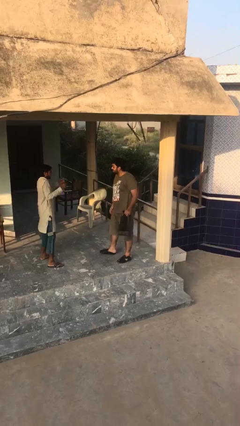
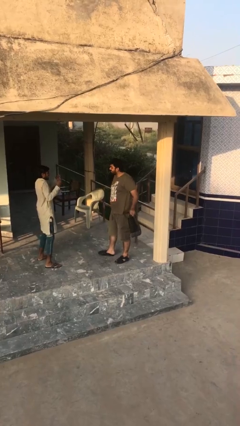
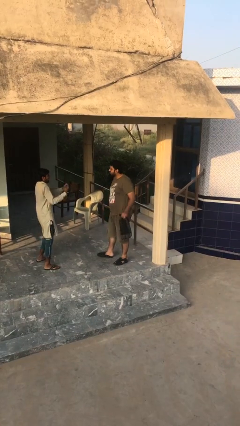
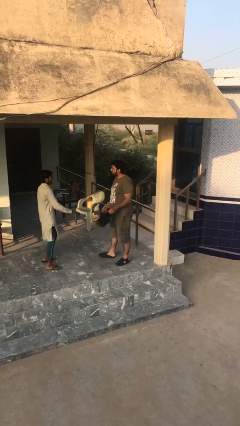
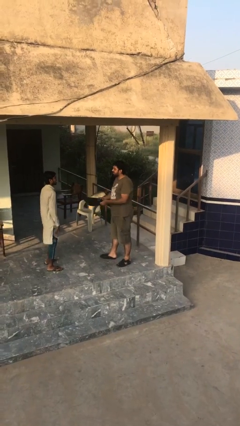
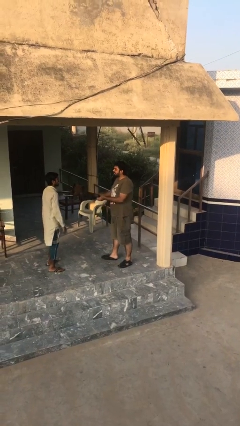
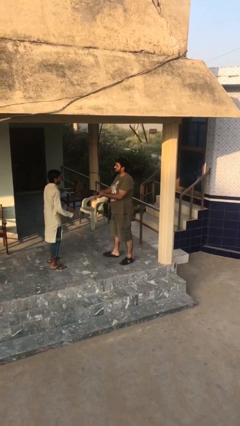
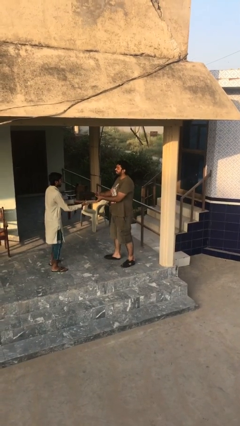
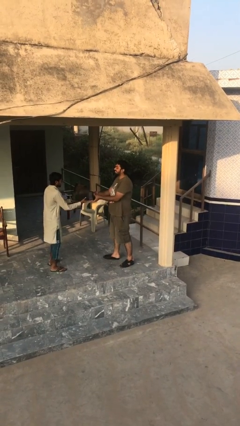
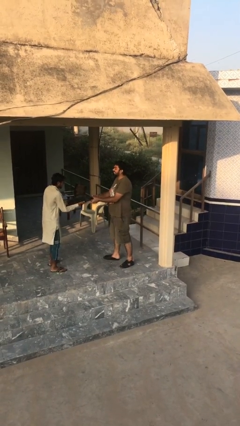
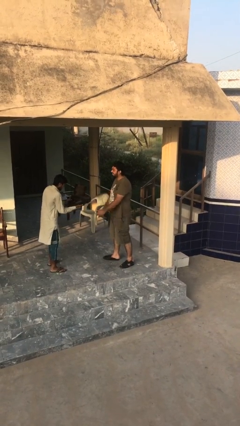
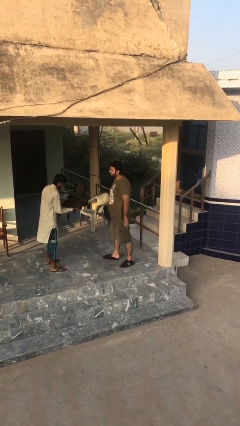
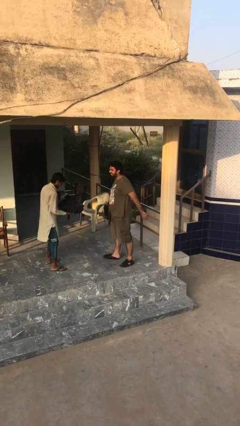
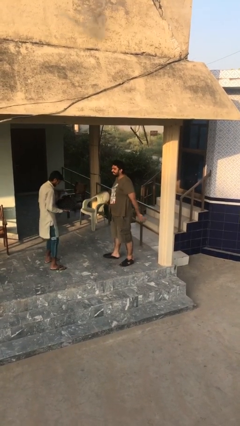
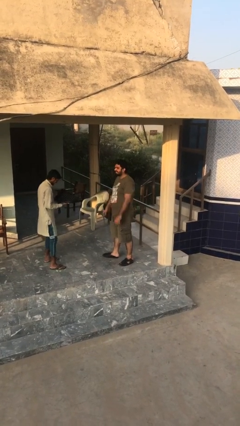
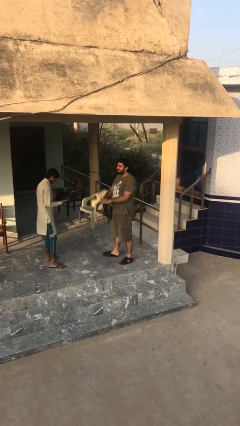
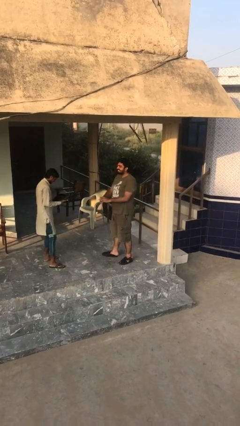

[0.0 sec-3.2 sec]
person transfers object to person

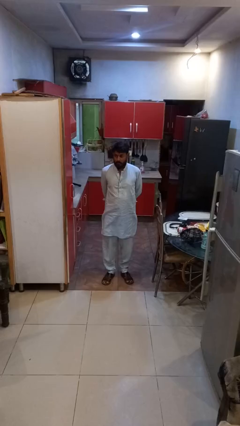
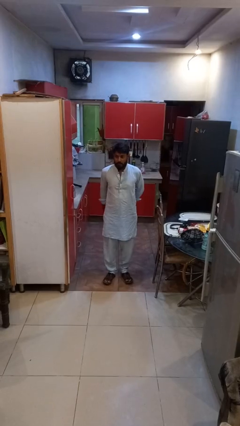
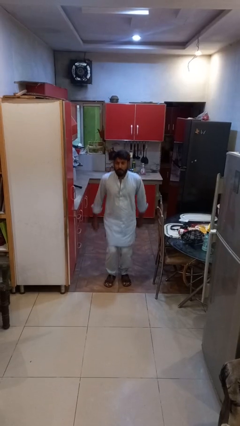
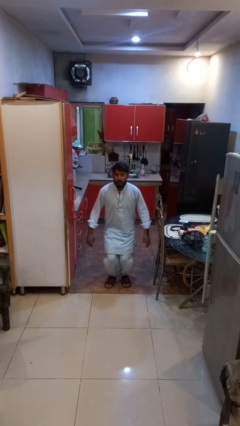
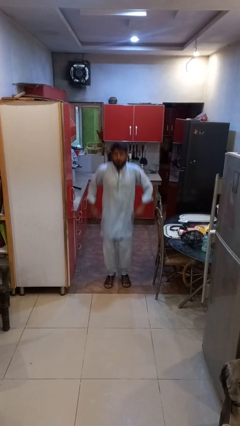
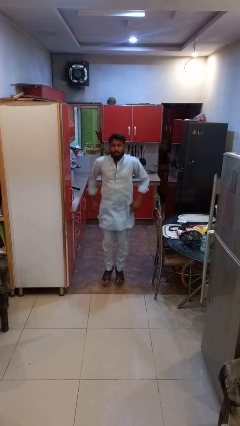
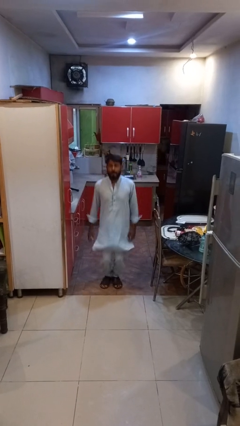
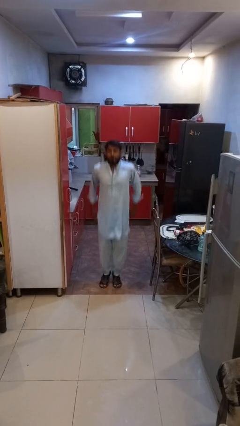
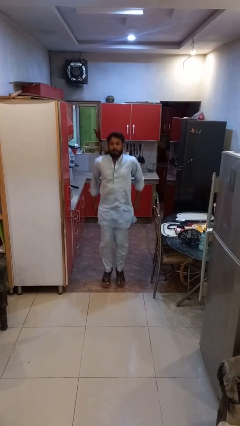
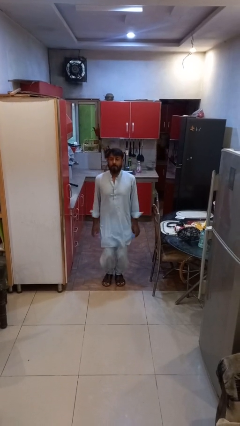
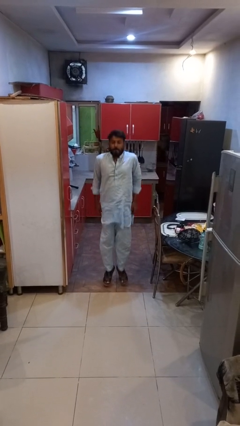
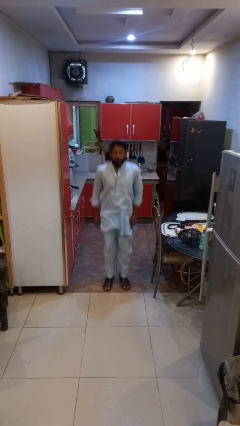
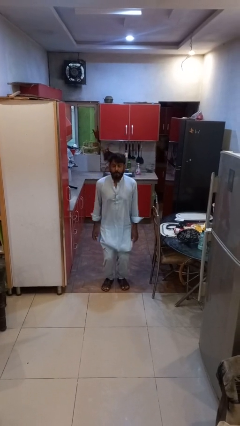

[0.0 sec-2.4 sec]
person jumps

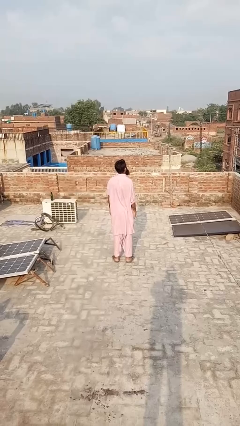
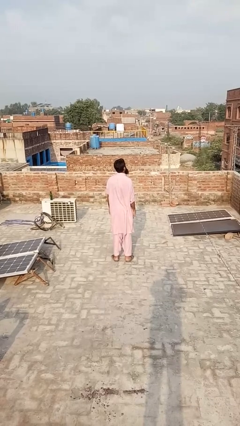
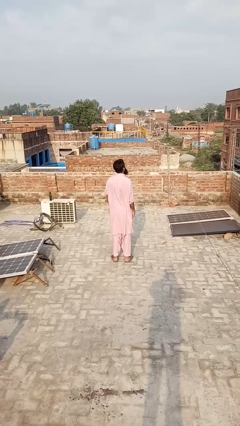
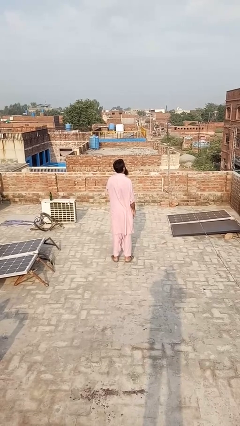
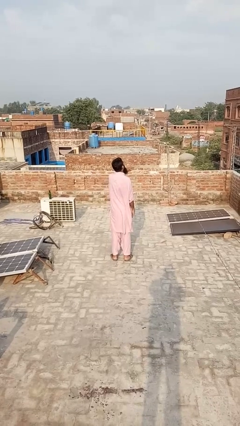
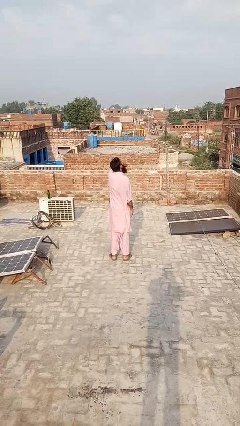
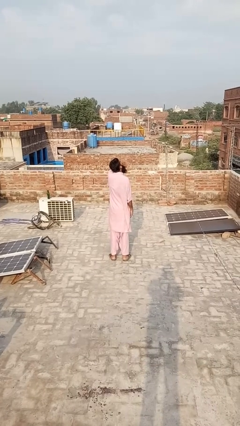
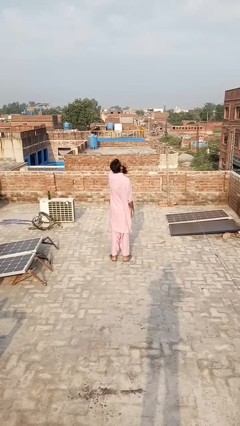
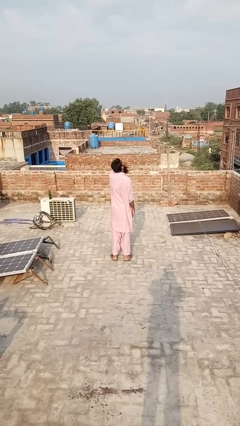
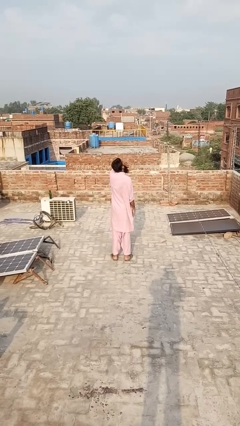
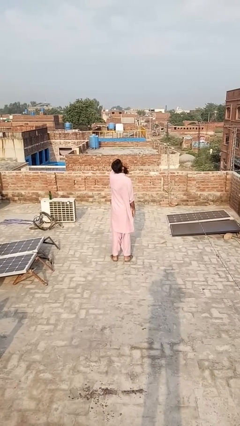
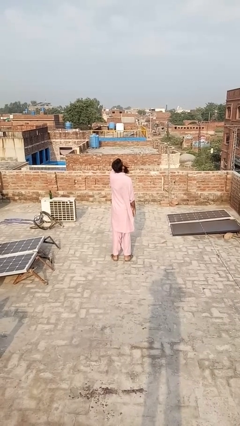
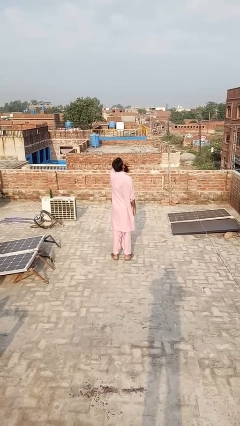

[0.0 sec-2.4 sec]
person yawns

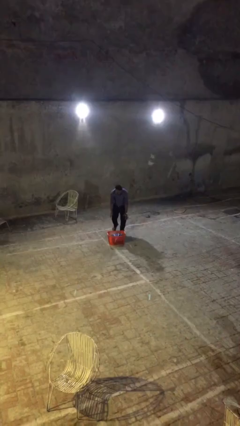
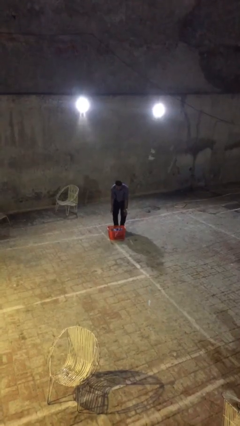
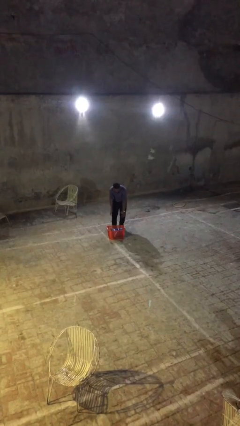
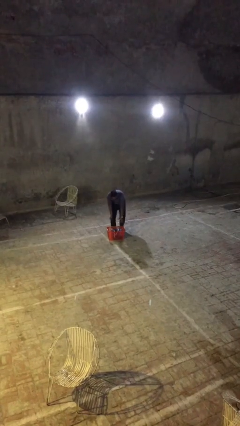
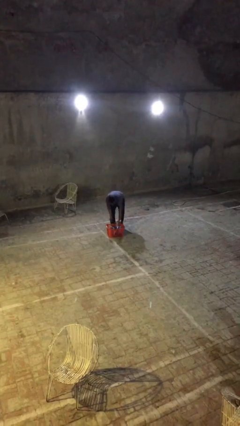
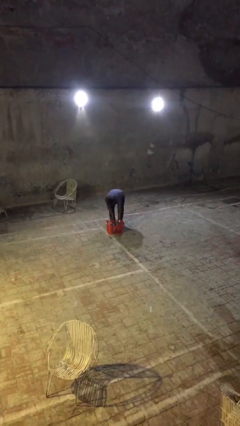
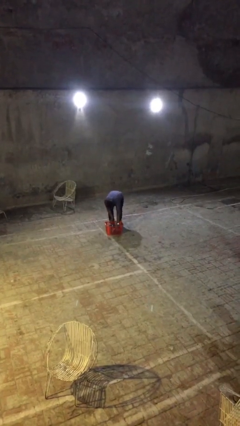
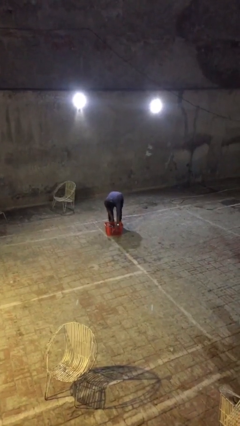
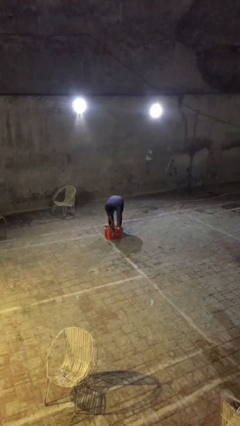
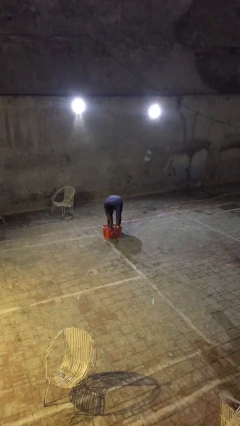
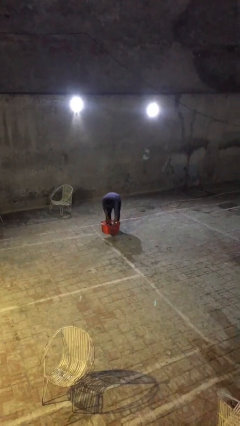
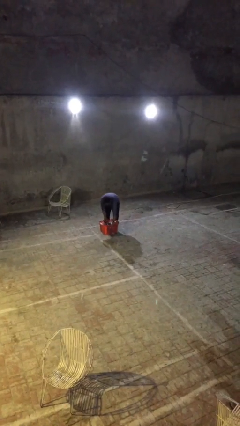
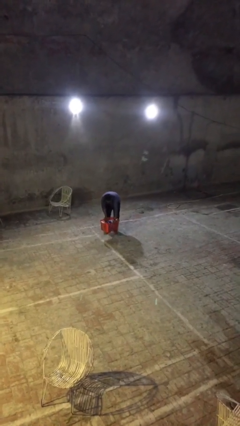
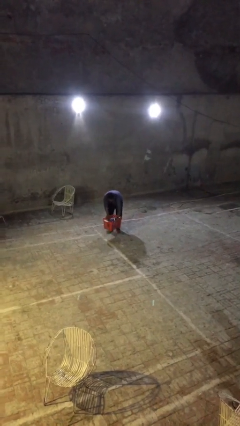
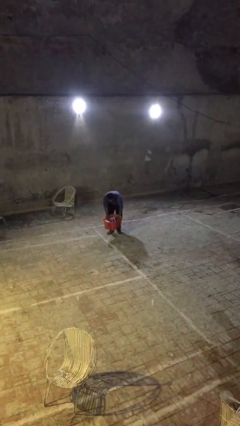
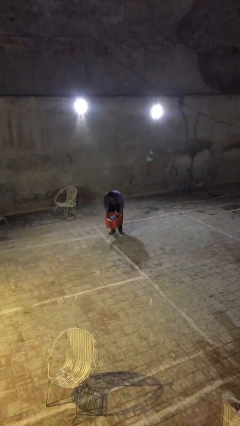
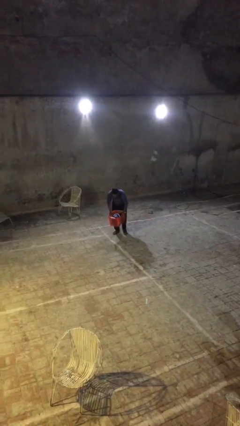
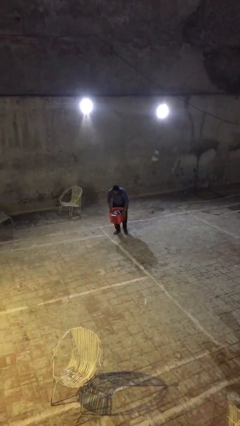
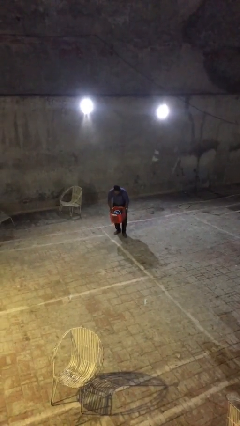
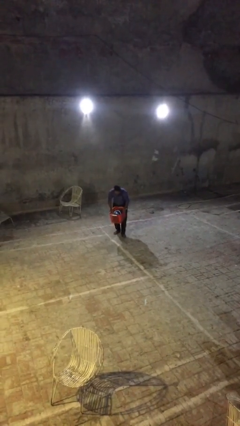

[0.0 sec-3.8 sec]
person picks up object from floor

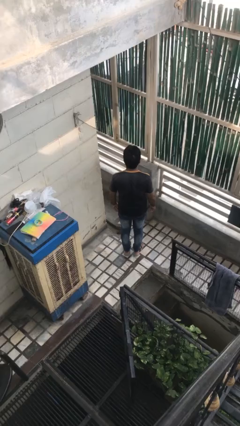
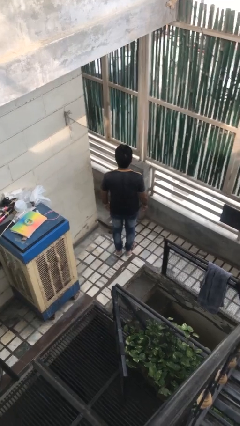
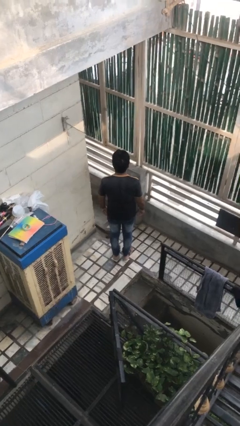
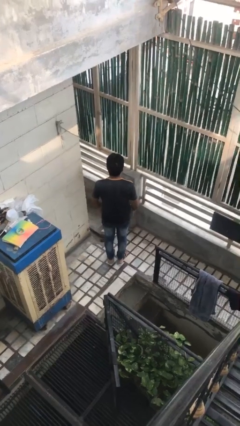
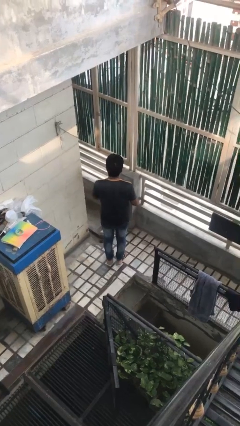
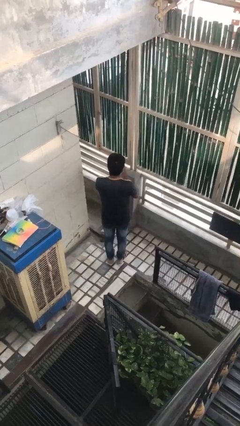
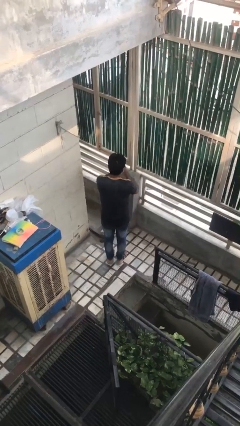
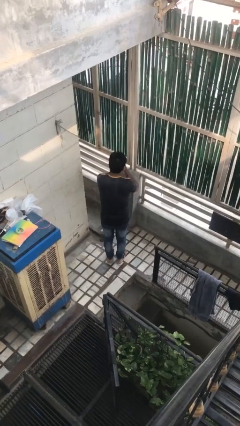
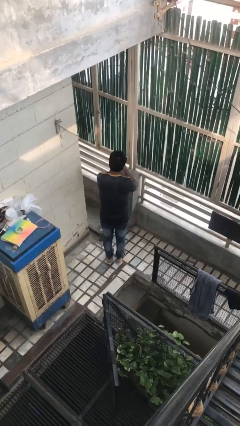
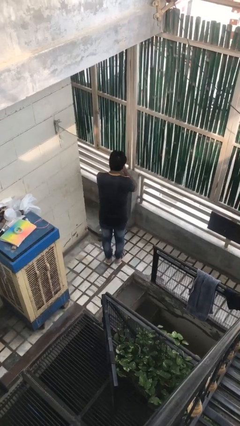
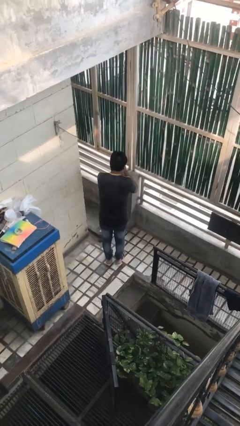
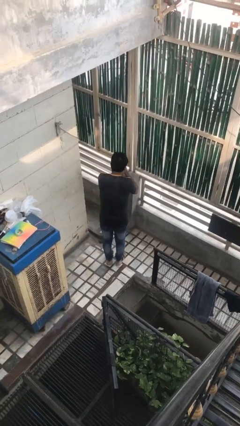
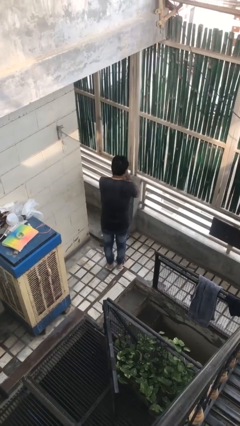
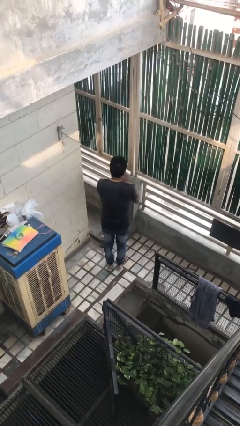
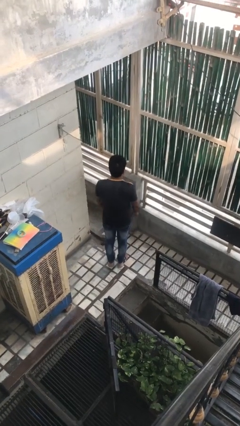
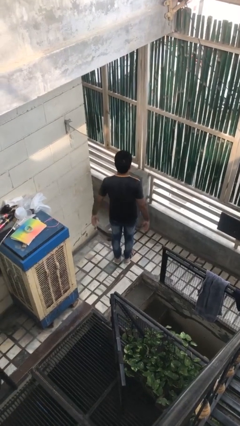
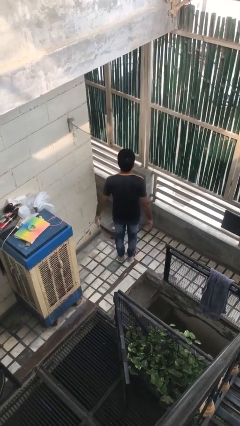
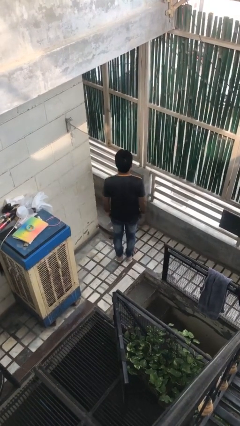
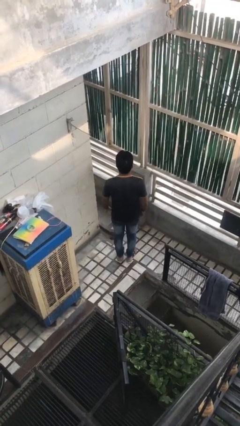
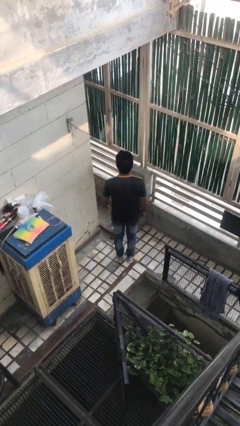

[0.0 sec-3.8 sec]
person prays

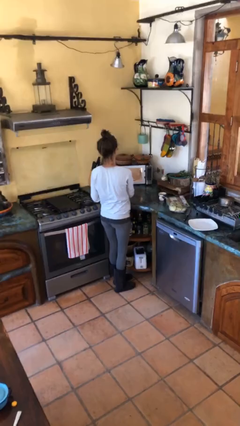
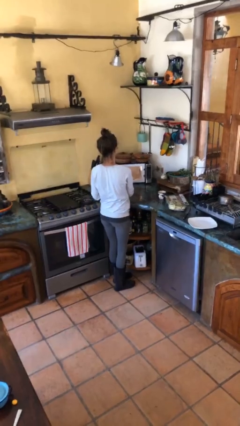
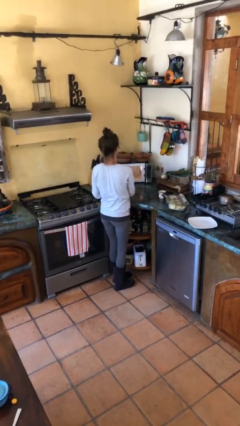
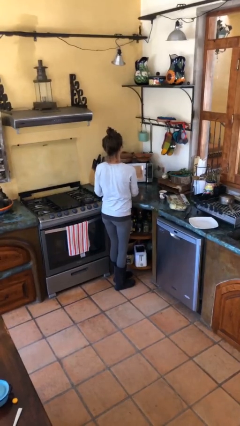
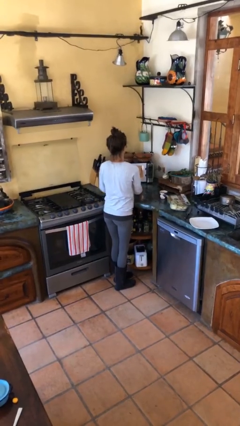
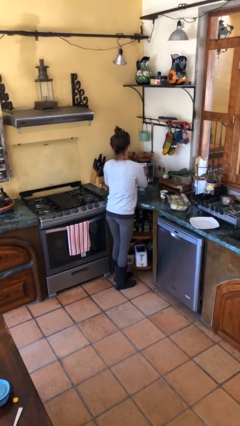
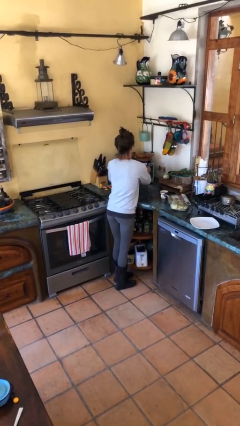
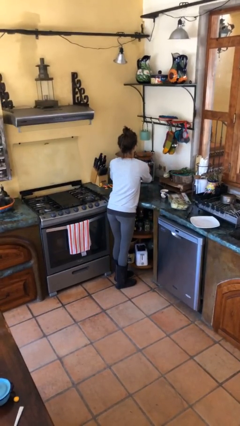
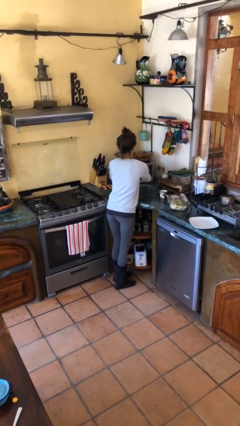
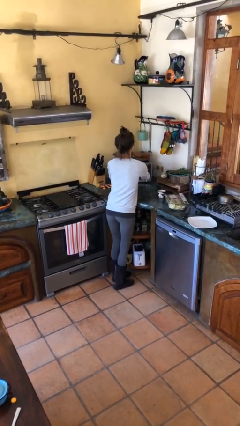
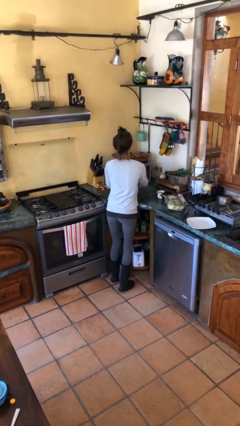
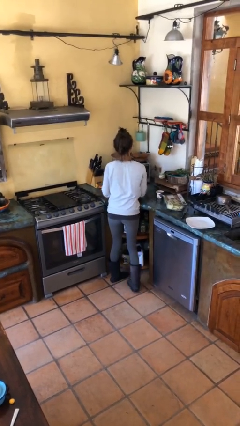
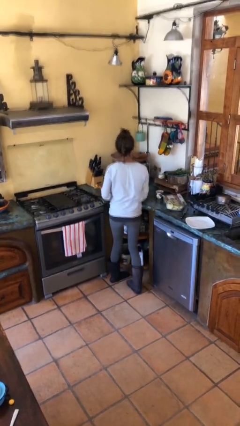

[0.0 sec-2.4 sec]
person closes microwave
